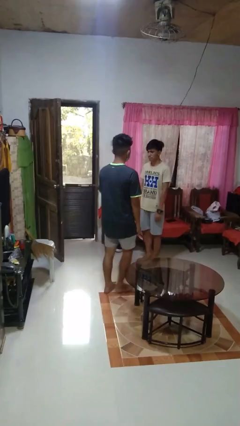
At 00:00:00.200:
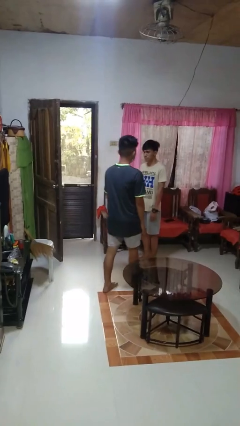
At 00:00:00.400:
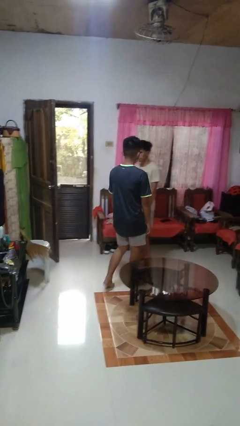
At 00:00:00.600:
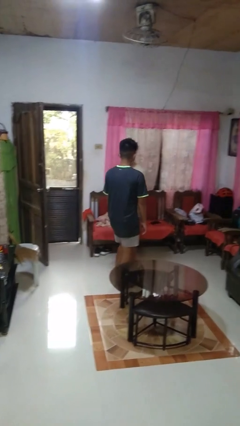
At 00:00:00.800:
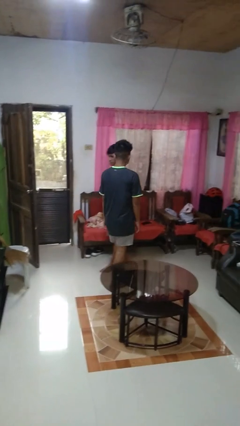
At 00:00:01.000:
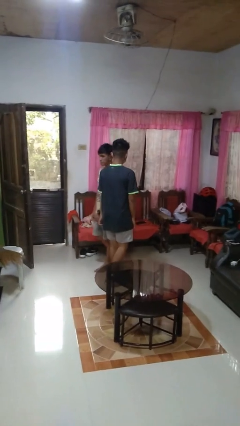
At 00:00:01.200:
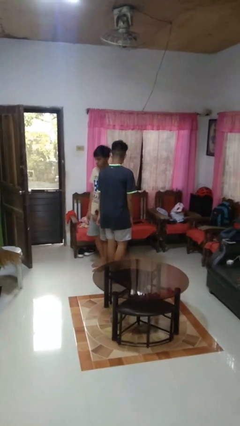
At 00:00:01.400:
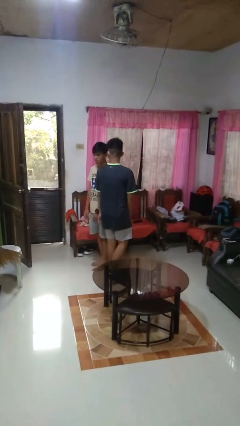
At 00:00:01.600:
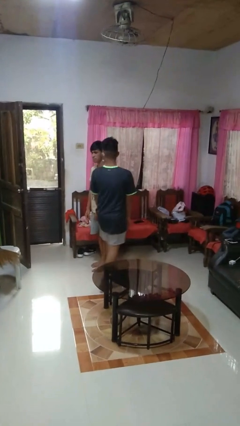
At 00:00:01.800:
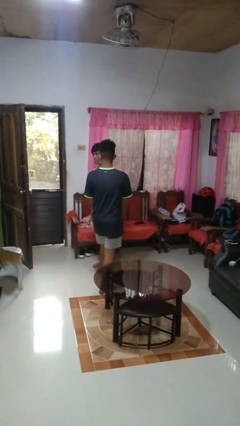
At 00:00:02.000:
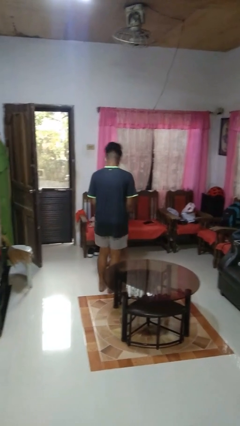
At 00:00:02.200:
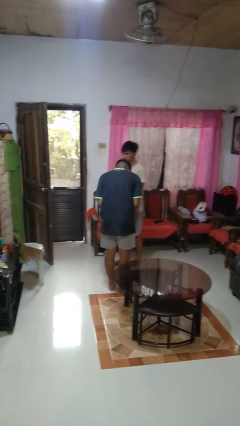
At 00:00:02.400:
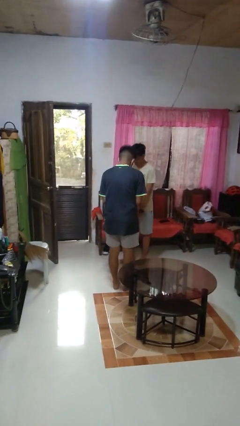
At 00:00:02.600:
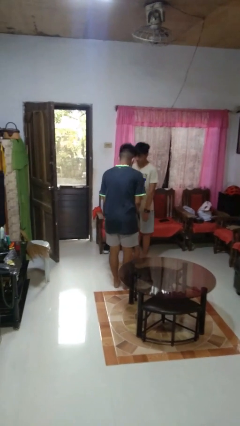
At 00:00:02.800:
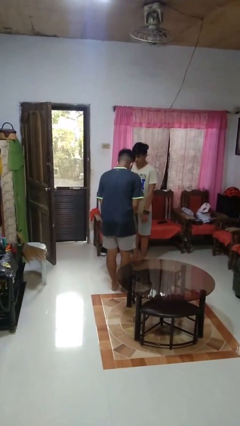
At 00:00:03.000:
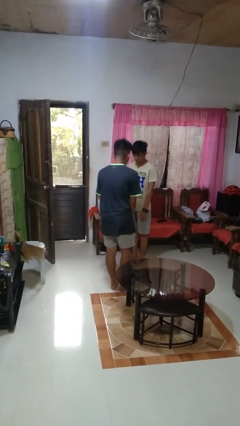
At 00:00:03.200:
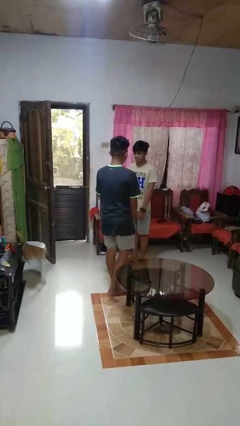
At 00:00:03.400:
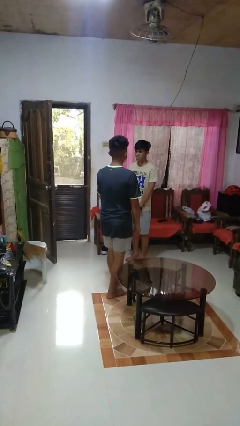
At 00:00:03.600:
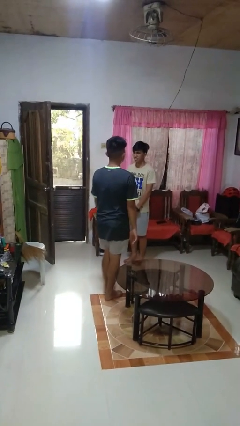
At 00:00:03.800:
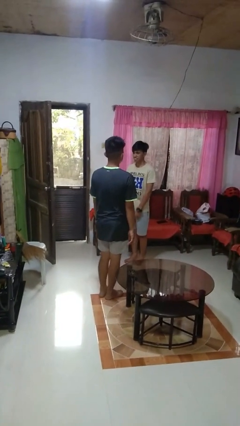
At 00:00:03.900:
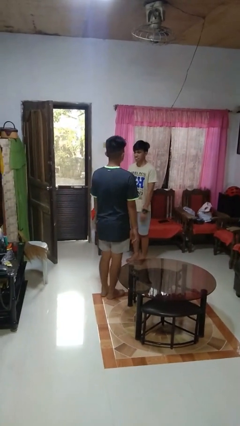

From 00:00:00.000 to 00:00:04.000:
person bumps into person

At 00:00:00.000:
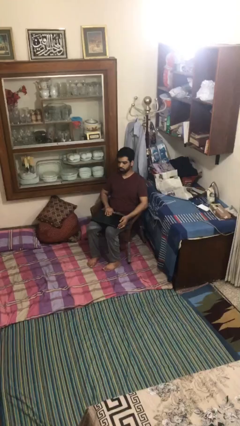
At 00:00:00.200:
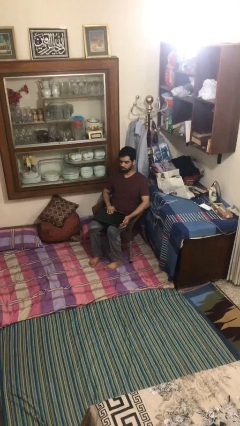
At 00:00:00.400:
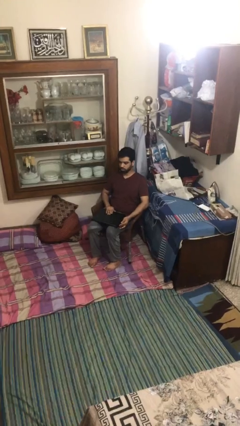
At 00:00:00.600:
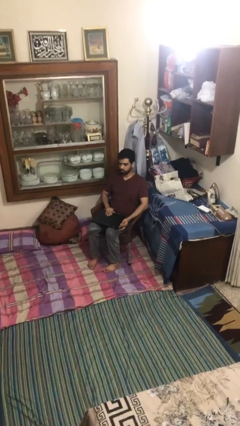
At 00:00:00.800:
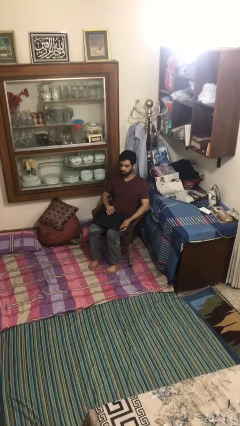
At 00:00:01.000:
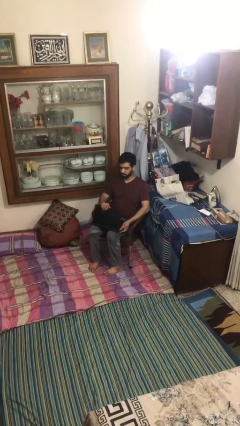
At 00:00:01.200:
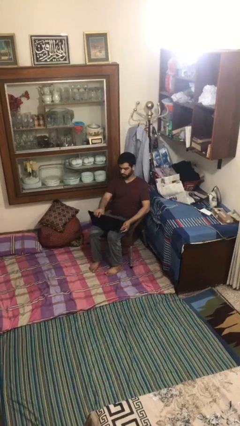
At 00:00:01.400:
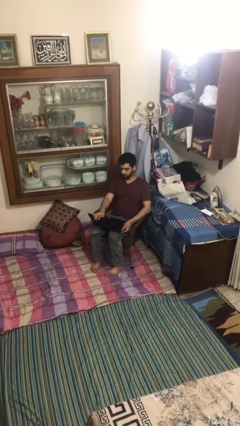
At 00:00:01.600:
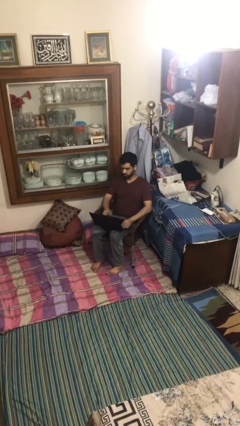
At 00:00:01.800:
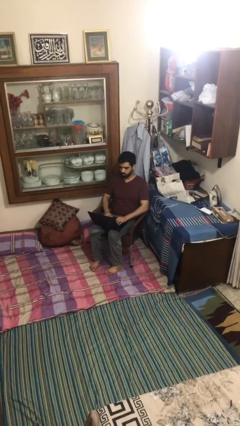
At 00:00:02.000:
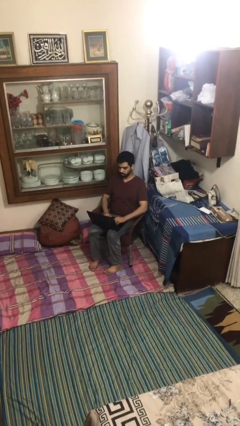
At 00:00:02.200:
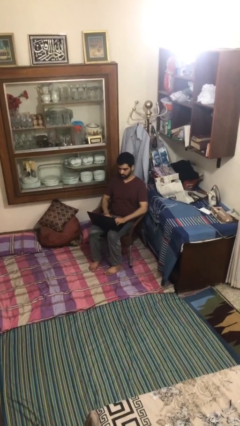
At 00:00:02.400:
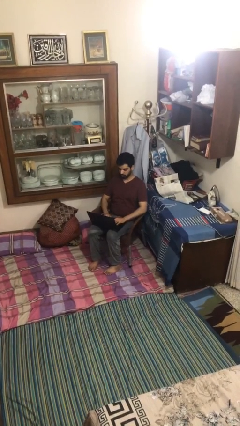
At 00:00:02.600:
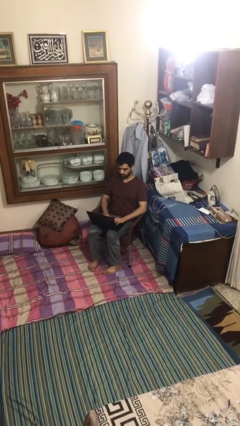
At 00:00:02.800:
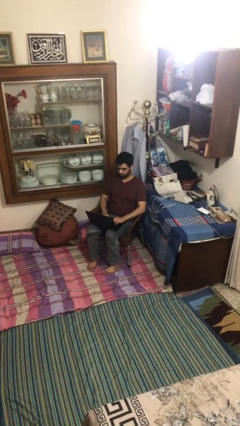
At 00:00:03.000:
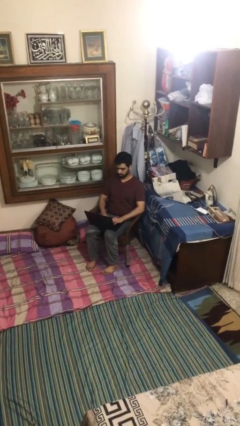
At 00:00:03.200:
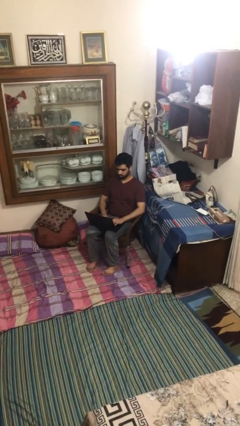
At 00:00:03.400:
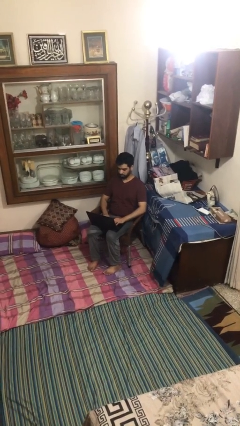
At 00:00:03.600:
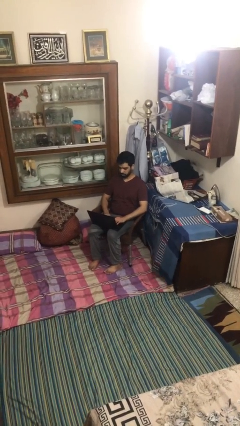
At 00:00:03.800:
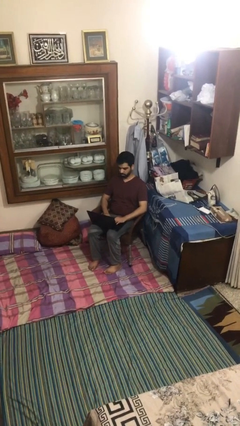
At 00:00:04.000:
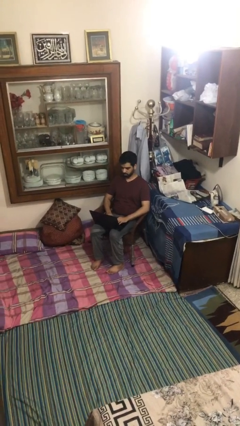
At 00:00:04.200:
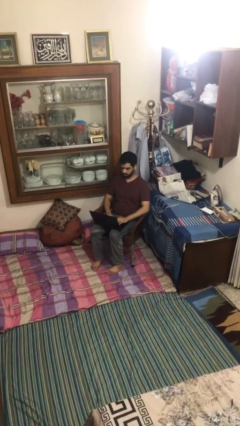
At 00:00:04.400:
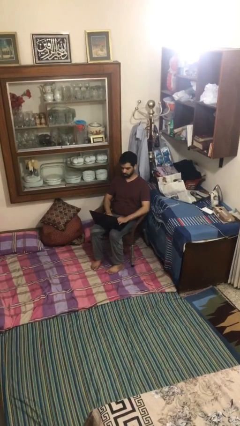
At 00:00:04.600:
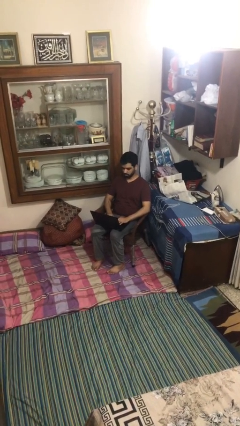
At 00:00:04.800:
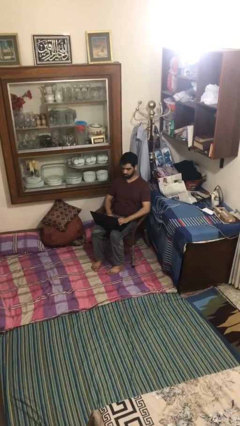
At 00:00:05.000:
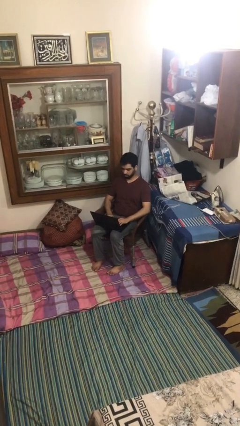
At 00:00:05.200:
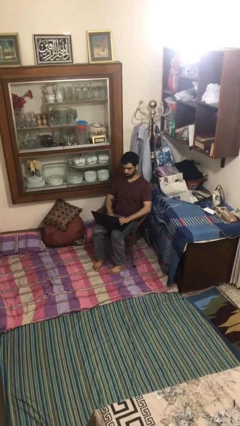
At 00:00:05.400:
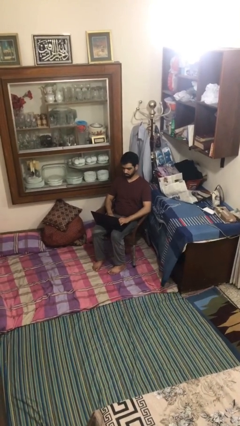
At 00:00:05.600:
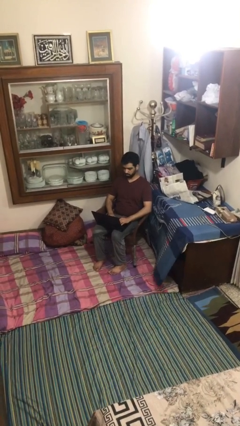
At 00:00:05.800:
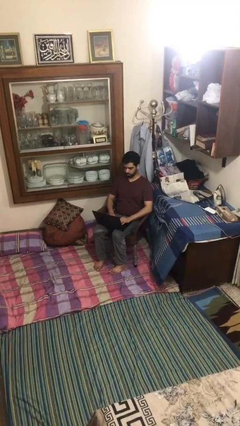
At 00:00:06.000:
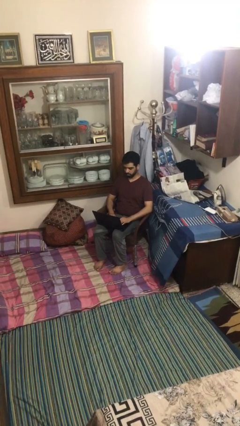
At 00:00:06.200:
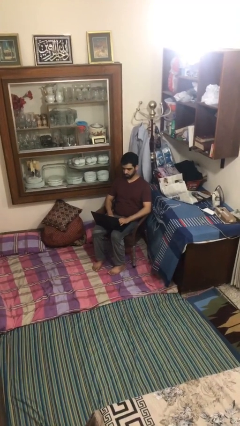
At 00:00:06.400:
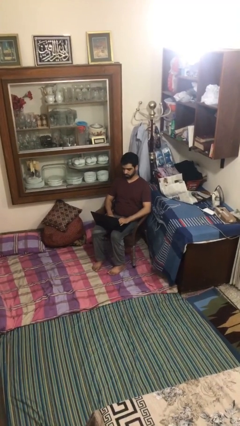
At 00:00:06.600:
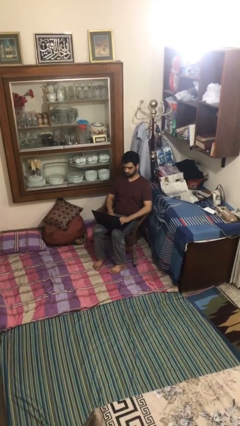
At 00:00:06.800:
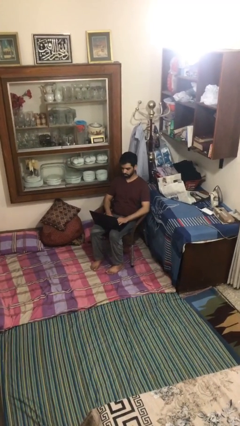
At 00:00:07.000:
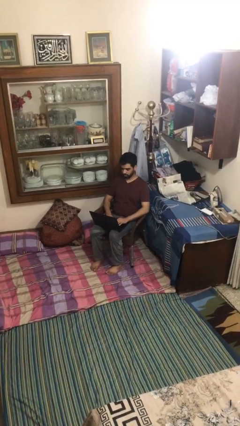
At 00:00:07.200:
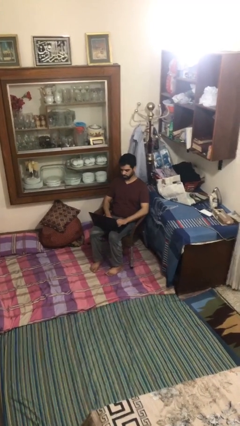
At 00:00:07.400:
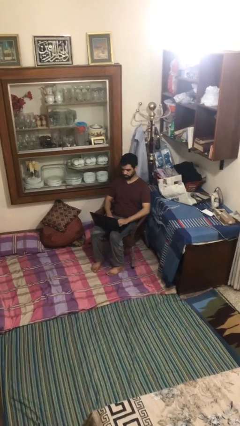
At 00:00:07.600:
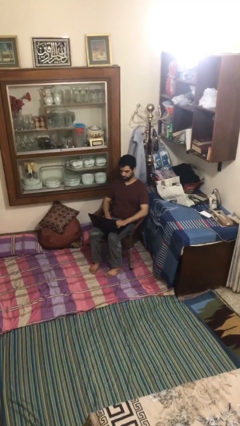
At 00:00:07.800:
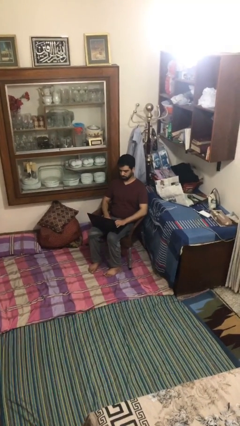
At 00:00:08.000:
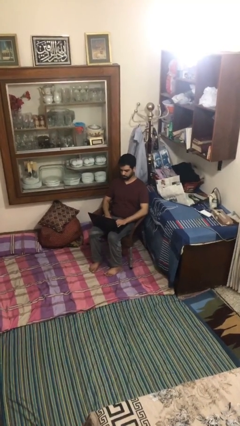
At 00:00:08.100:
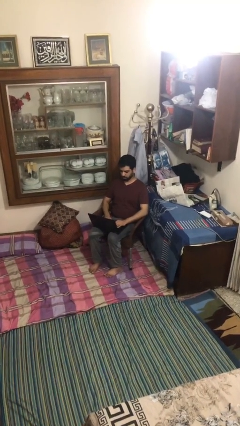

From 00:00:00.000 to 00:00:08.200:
person interacts with laptop

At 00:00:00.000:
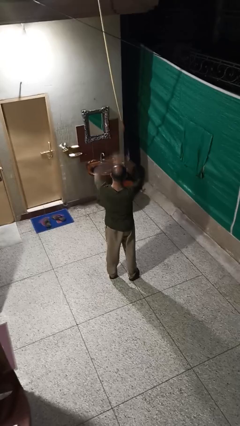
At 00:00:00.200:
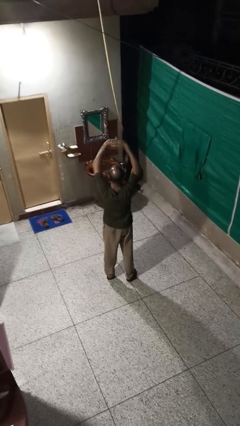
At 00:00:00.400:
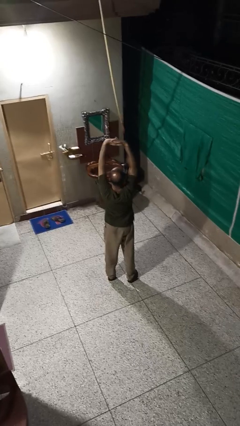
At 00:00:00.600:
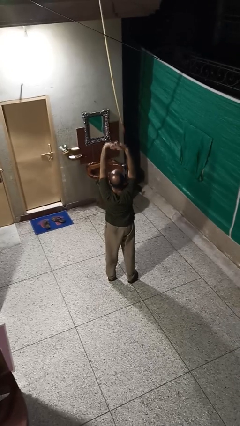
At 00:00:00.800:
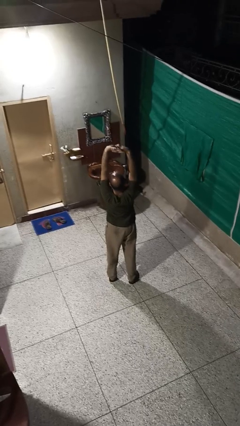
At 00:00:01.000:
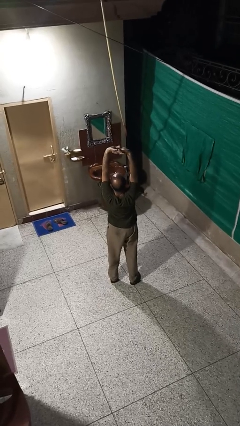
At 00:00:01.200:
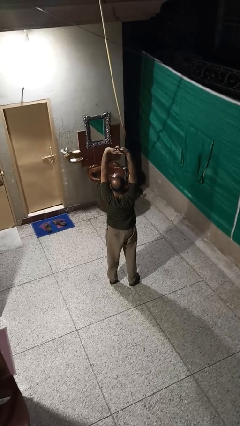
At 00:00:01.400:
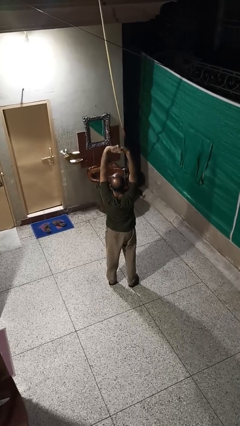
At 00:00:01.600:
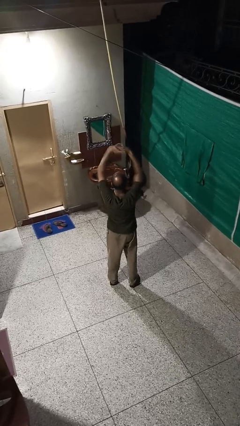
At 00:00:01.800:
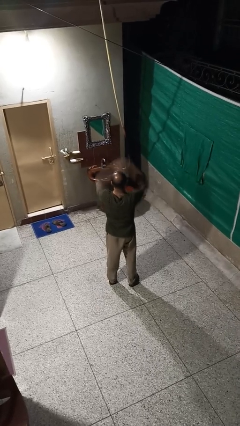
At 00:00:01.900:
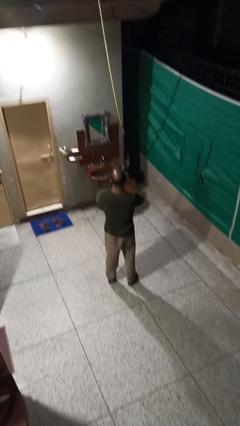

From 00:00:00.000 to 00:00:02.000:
person stretches arms over head

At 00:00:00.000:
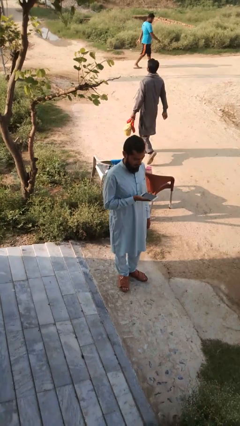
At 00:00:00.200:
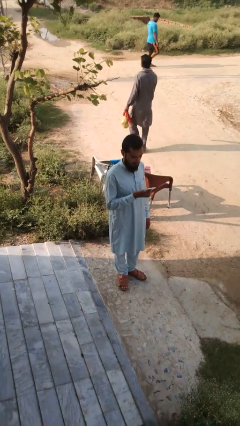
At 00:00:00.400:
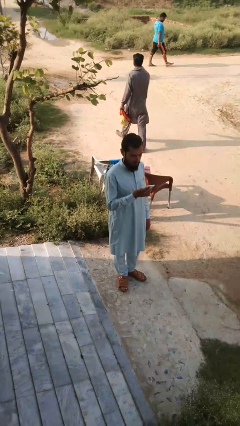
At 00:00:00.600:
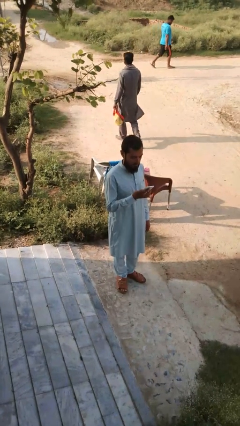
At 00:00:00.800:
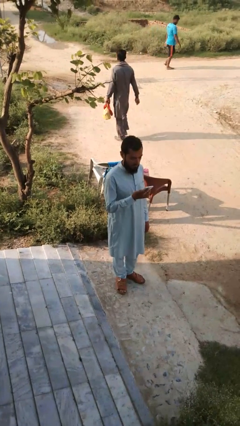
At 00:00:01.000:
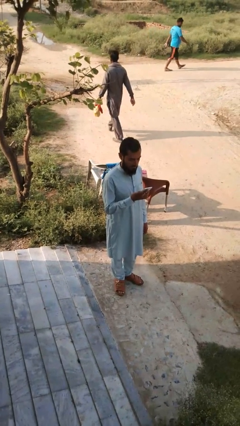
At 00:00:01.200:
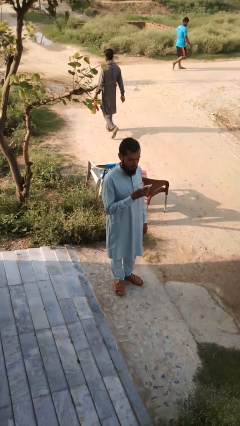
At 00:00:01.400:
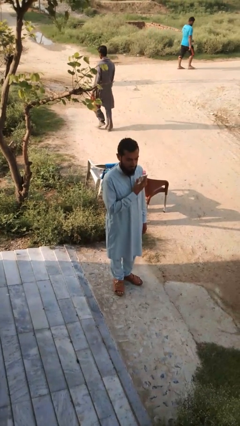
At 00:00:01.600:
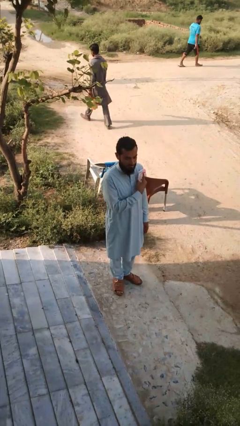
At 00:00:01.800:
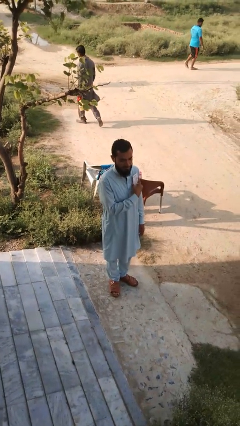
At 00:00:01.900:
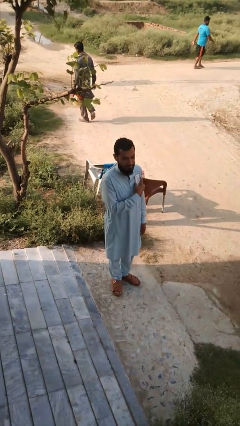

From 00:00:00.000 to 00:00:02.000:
person puts phone into pocket

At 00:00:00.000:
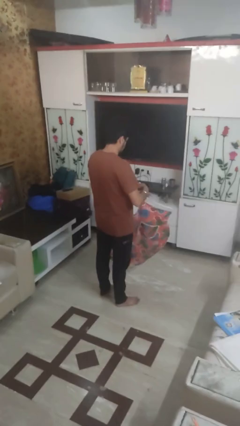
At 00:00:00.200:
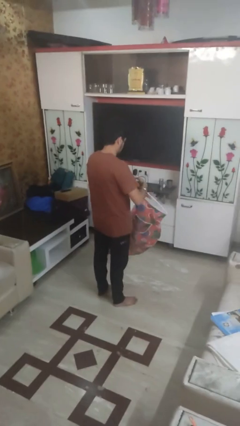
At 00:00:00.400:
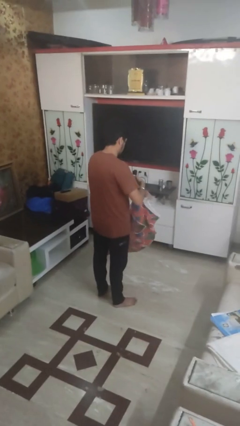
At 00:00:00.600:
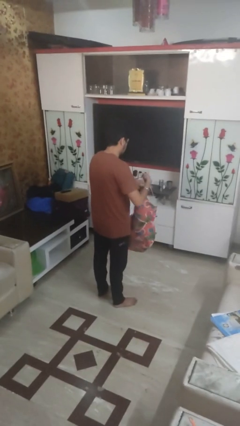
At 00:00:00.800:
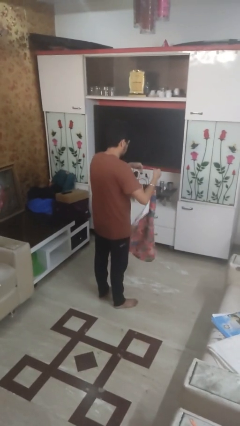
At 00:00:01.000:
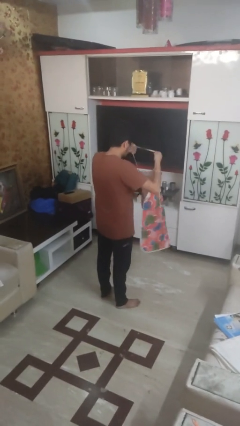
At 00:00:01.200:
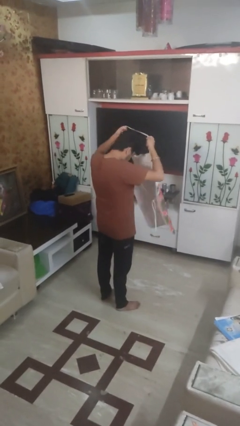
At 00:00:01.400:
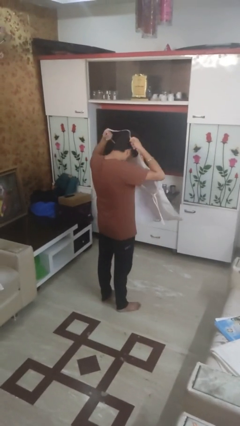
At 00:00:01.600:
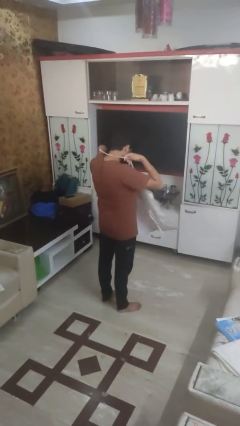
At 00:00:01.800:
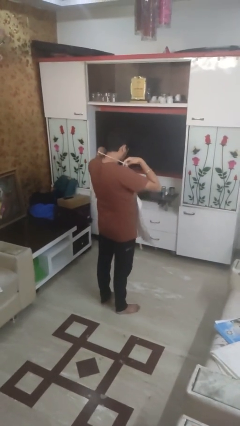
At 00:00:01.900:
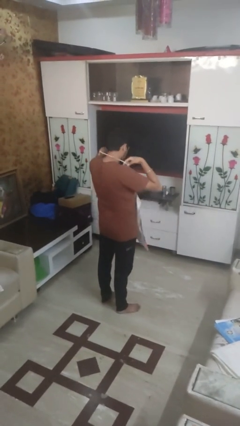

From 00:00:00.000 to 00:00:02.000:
person puts on apron
